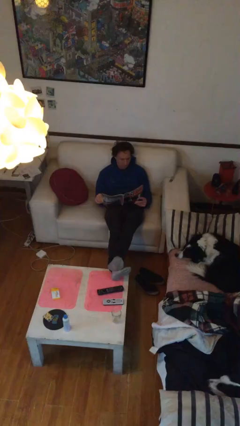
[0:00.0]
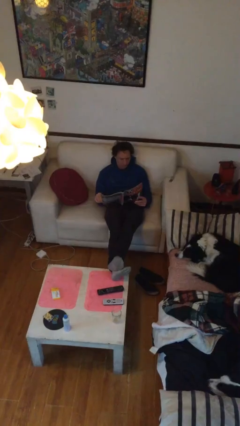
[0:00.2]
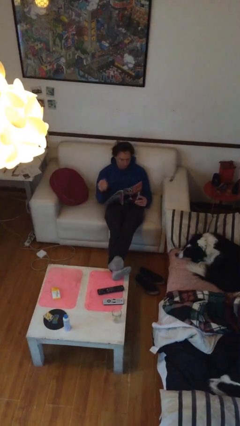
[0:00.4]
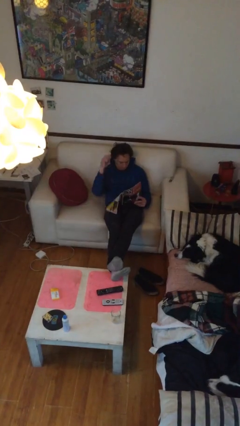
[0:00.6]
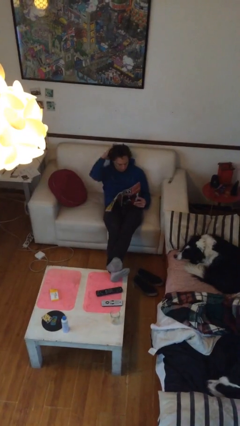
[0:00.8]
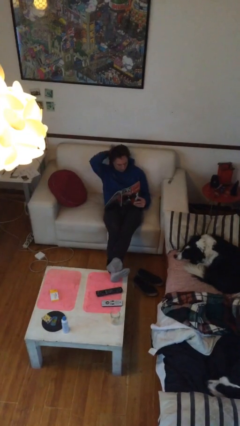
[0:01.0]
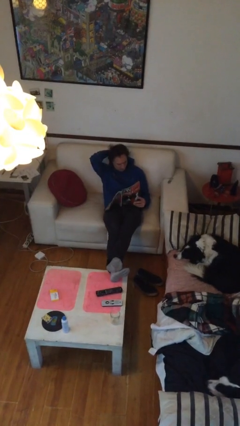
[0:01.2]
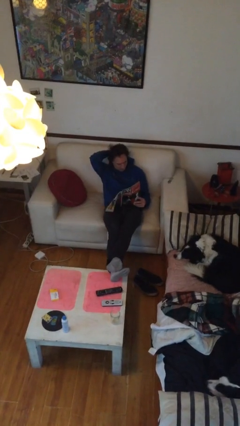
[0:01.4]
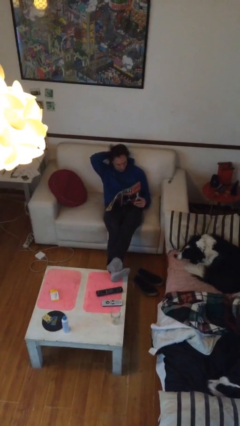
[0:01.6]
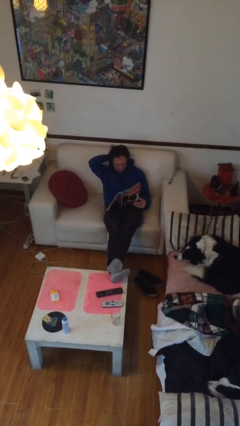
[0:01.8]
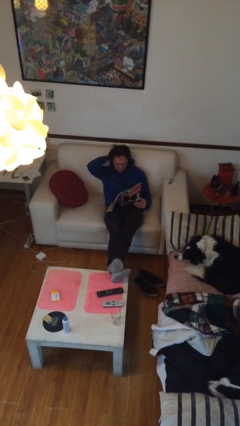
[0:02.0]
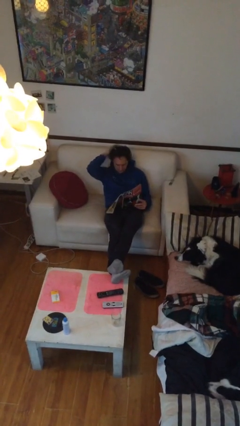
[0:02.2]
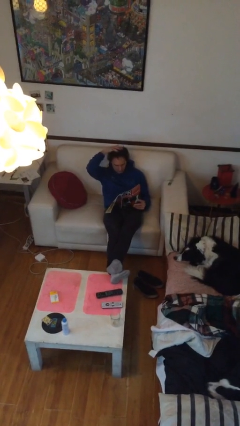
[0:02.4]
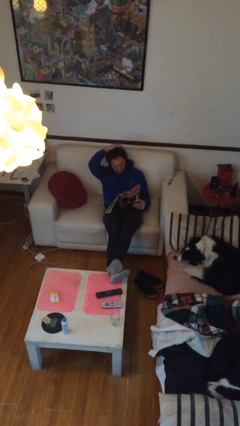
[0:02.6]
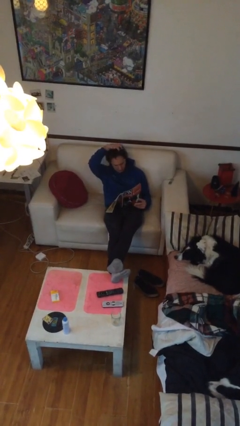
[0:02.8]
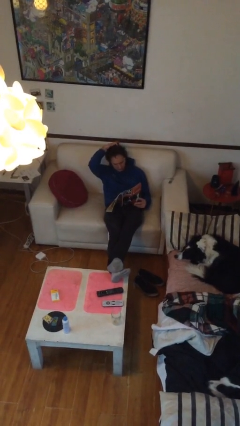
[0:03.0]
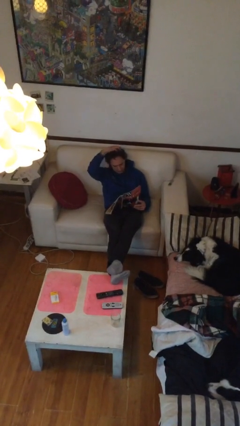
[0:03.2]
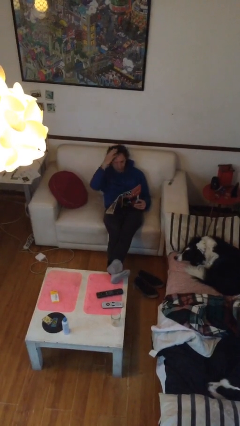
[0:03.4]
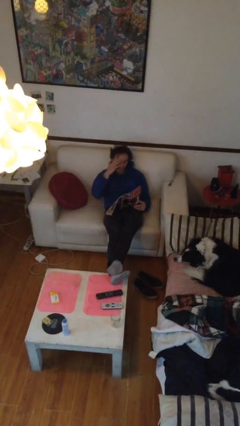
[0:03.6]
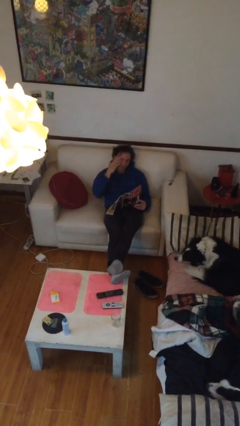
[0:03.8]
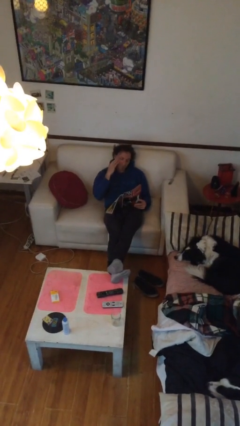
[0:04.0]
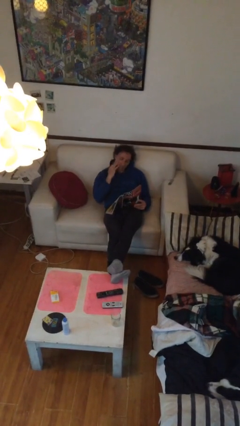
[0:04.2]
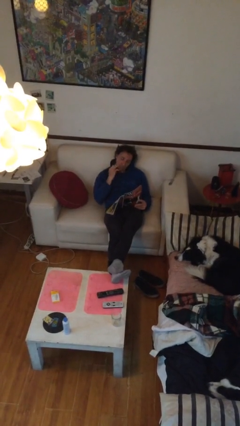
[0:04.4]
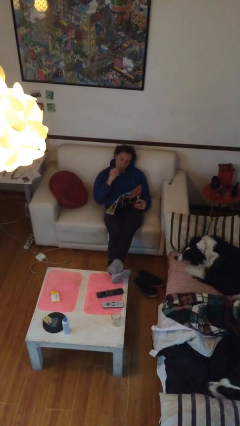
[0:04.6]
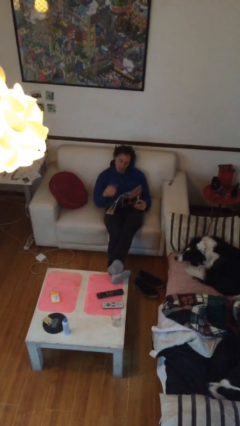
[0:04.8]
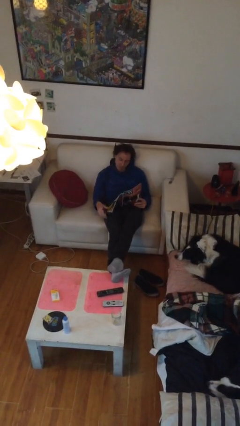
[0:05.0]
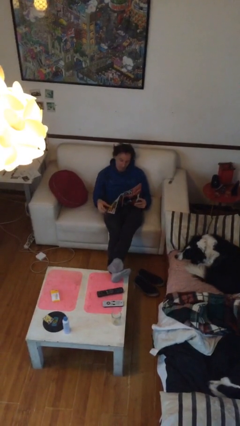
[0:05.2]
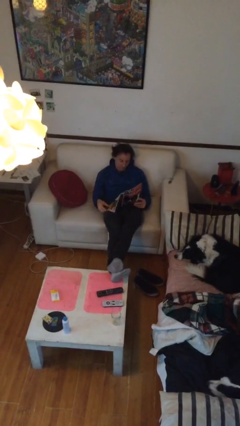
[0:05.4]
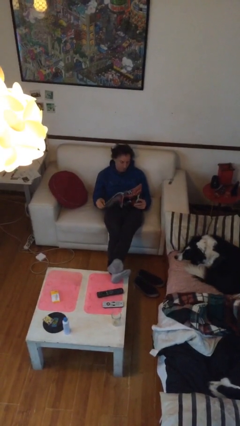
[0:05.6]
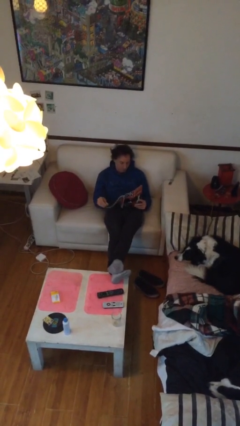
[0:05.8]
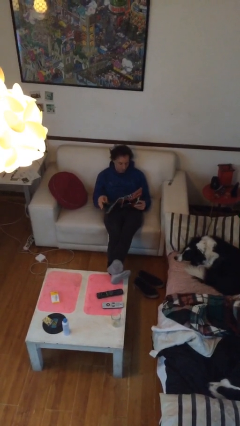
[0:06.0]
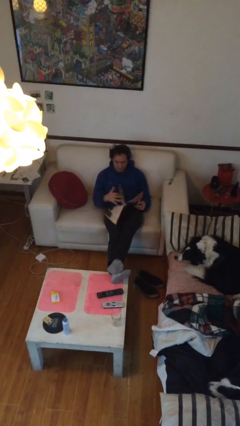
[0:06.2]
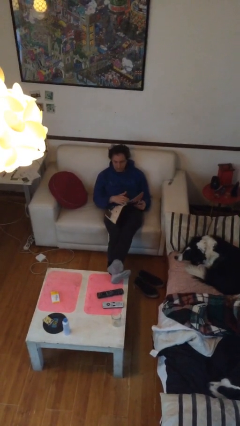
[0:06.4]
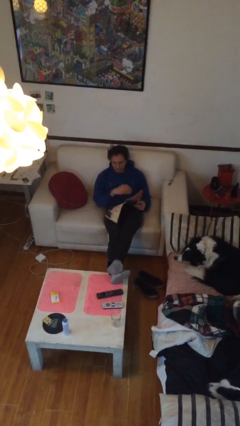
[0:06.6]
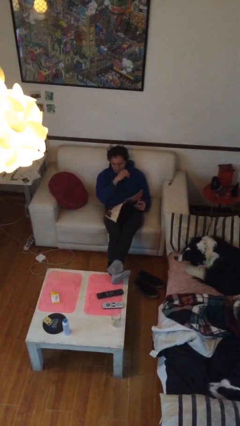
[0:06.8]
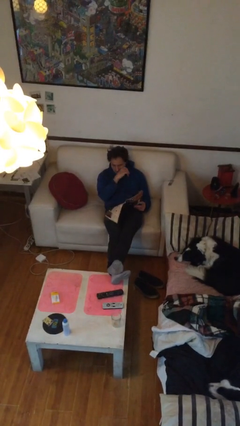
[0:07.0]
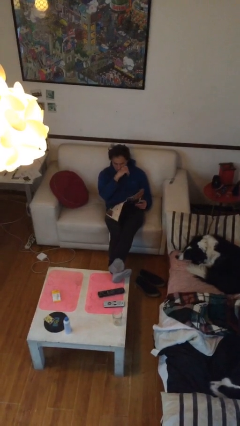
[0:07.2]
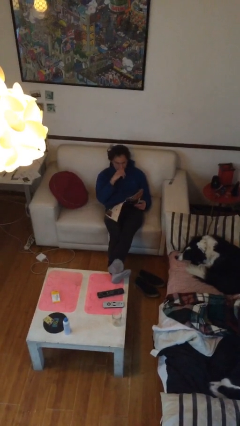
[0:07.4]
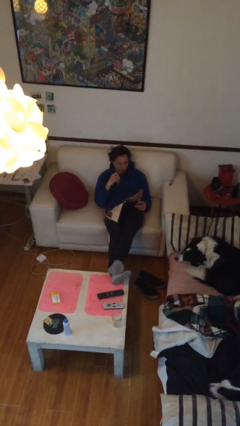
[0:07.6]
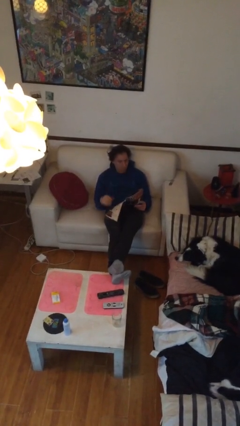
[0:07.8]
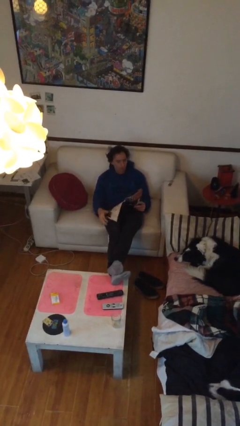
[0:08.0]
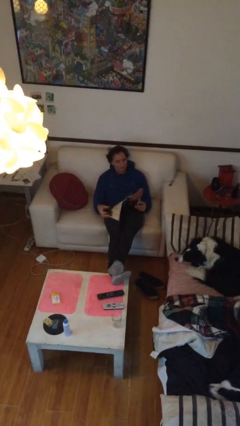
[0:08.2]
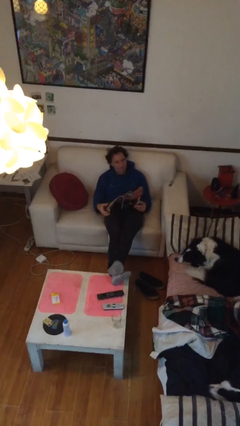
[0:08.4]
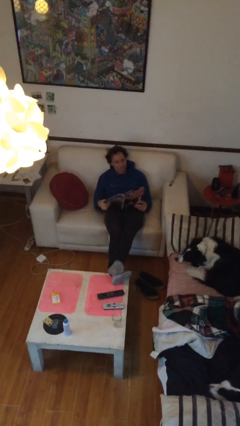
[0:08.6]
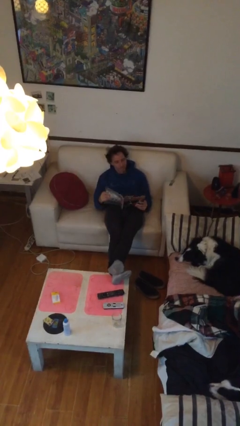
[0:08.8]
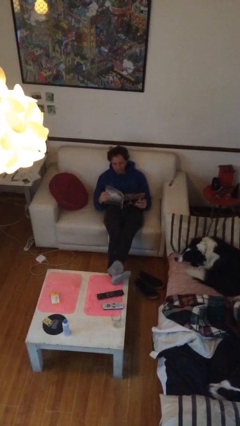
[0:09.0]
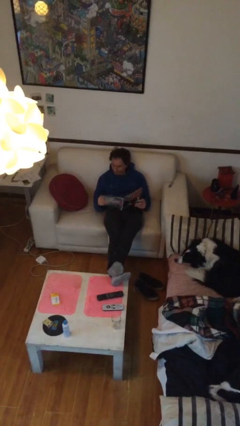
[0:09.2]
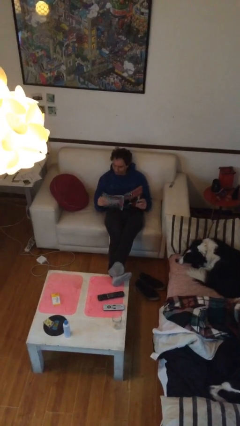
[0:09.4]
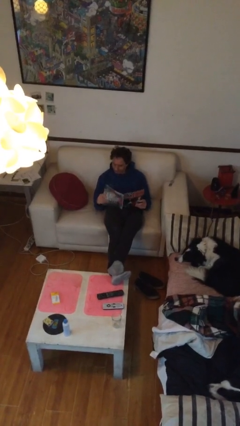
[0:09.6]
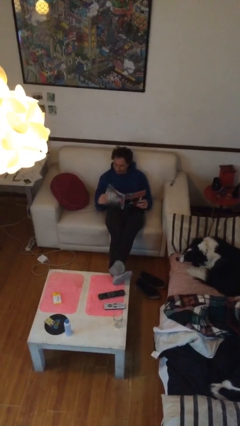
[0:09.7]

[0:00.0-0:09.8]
person reads document

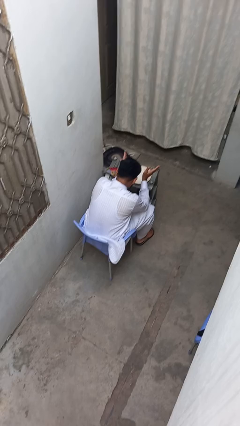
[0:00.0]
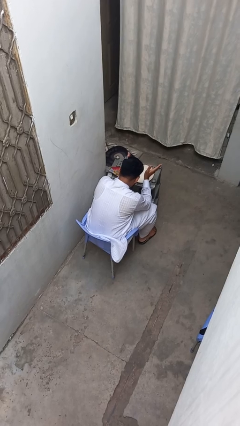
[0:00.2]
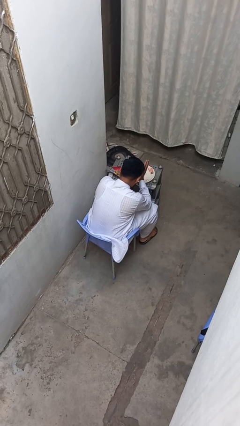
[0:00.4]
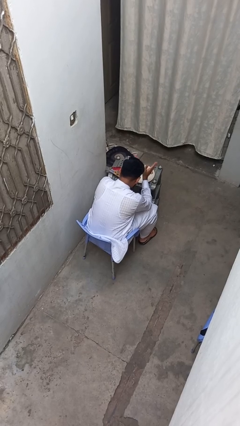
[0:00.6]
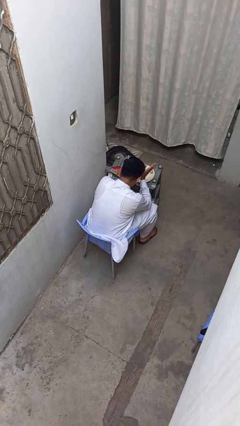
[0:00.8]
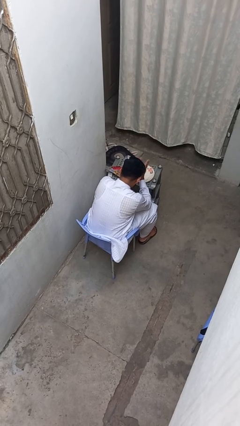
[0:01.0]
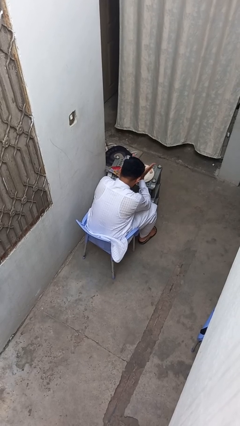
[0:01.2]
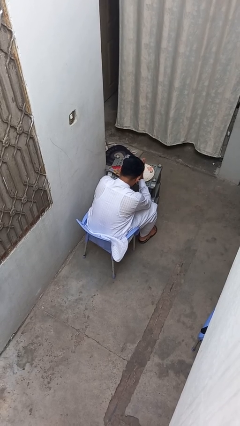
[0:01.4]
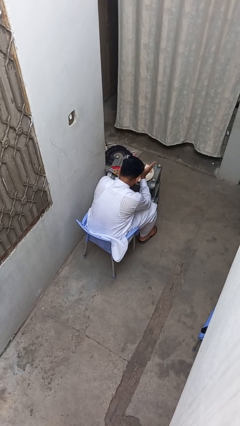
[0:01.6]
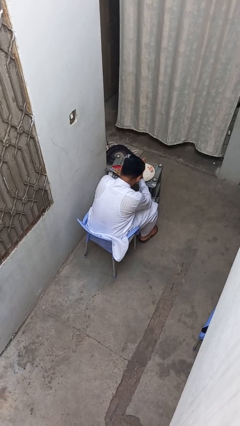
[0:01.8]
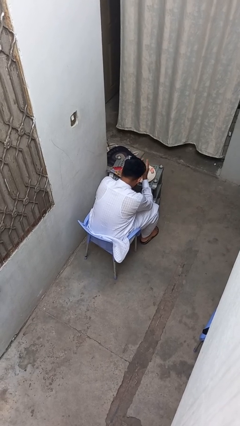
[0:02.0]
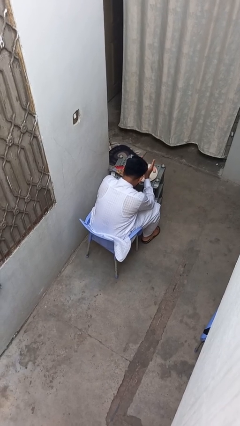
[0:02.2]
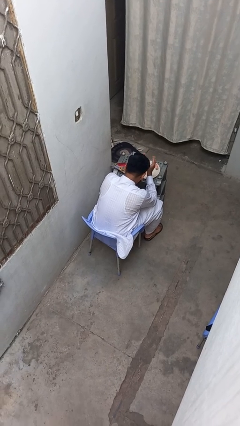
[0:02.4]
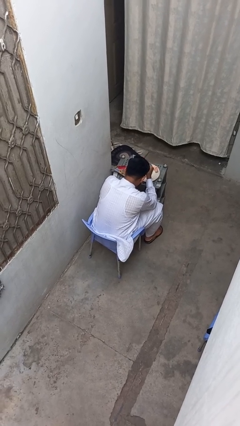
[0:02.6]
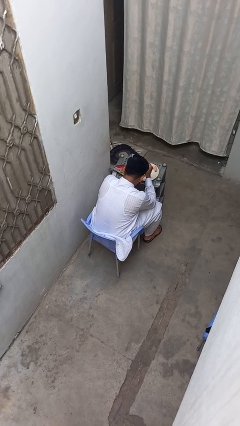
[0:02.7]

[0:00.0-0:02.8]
person claps hands

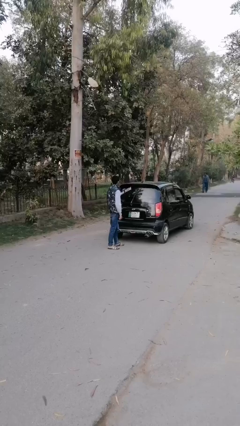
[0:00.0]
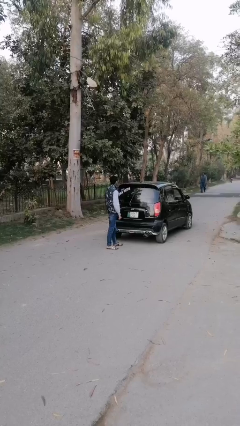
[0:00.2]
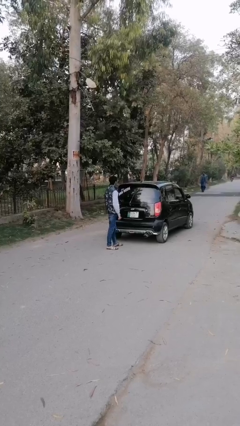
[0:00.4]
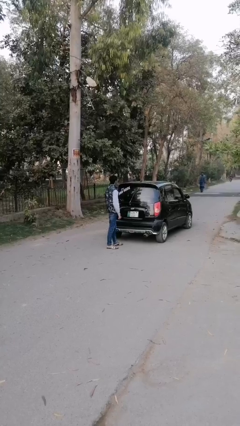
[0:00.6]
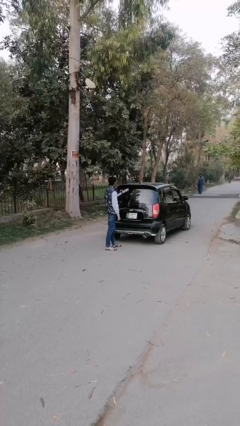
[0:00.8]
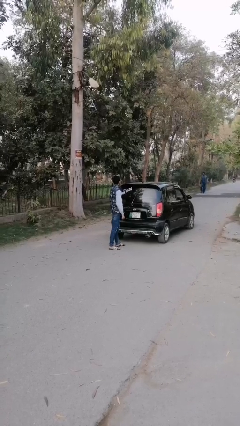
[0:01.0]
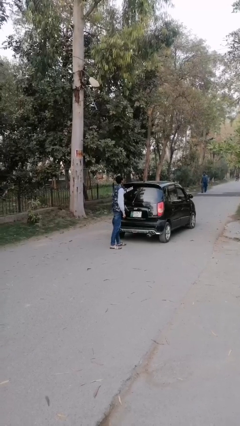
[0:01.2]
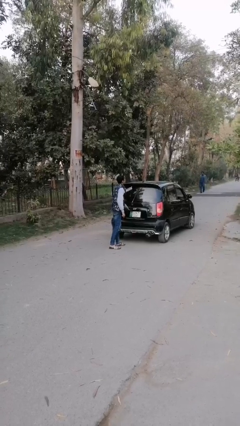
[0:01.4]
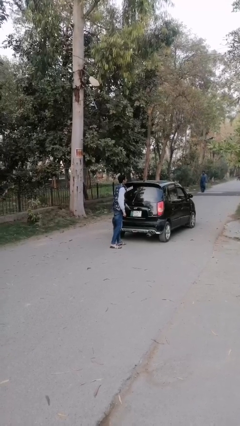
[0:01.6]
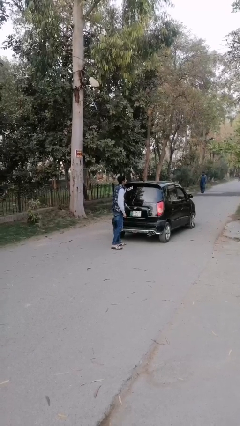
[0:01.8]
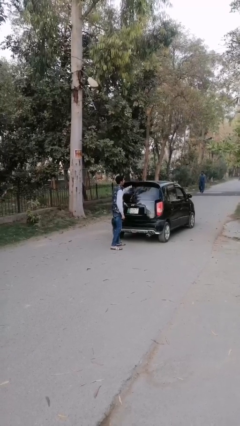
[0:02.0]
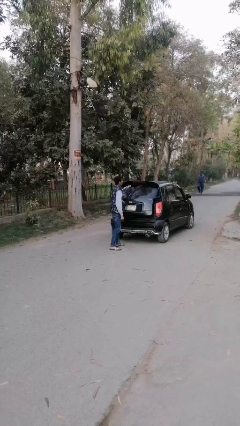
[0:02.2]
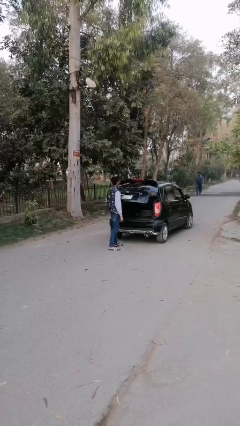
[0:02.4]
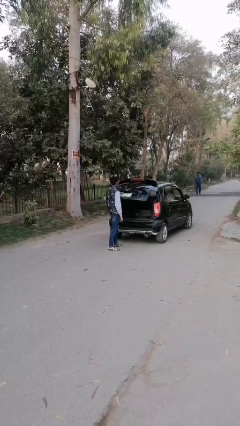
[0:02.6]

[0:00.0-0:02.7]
person closes car trunk

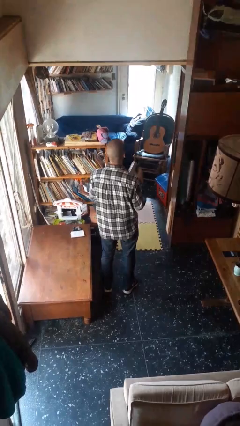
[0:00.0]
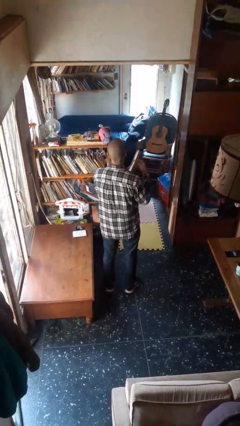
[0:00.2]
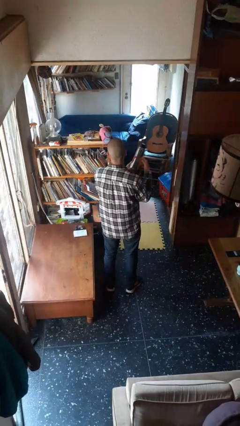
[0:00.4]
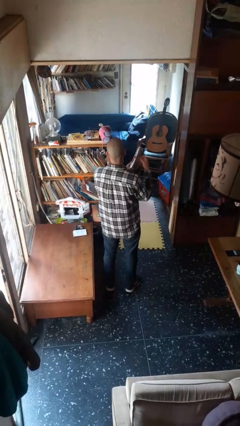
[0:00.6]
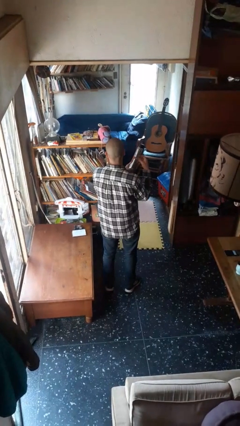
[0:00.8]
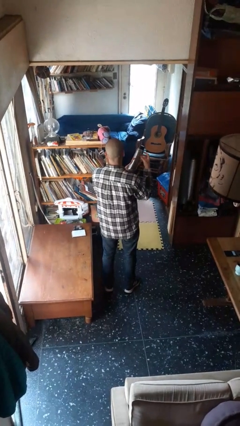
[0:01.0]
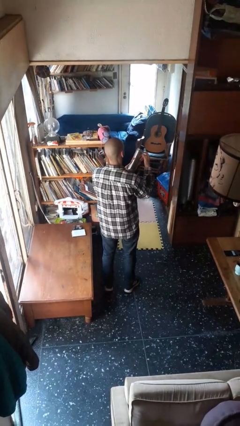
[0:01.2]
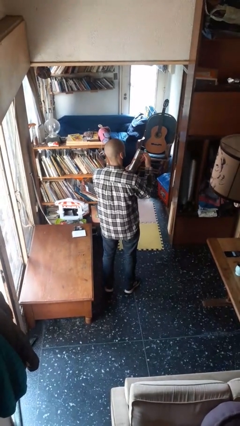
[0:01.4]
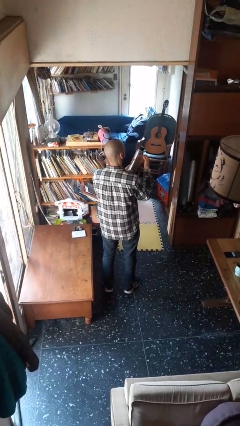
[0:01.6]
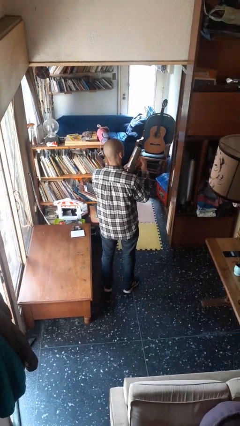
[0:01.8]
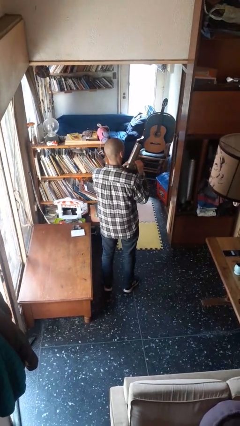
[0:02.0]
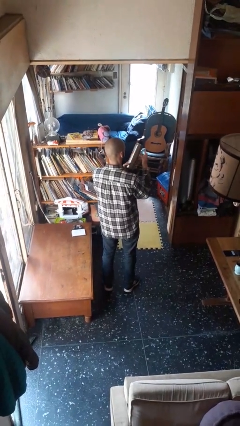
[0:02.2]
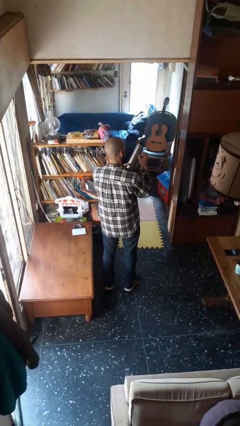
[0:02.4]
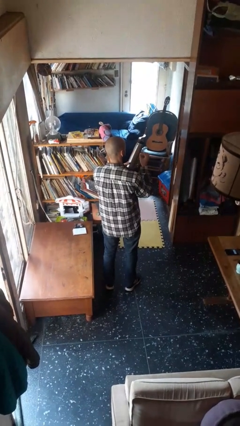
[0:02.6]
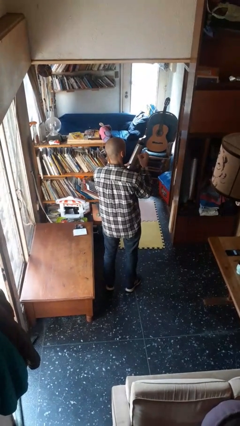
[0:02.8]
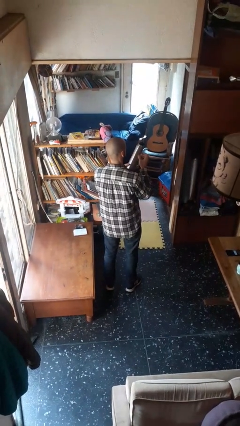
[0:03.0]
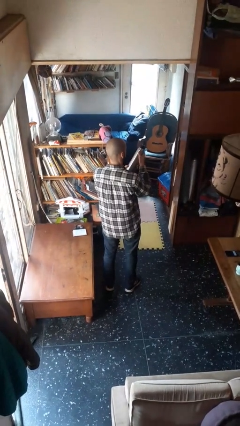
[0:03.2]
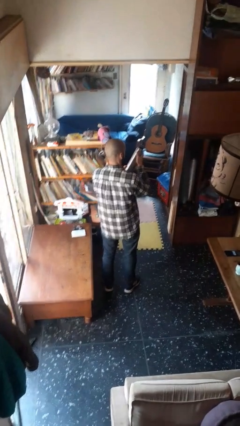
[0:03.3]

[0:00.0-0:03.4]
person taps object with finger
